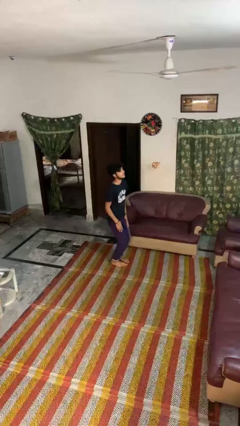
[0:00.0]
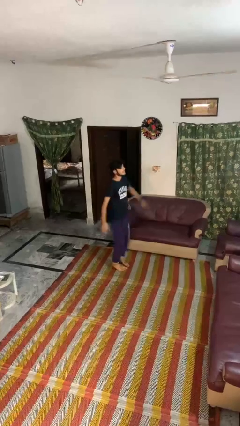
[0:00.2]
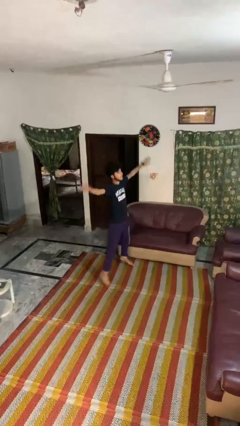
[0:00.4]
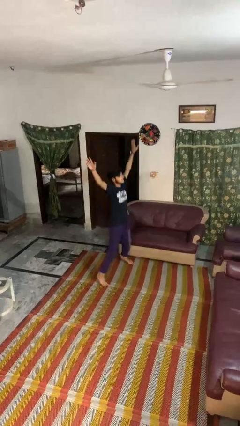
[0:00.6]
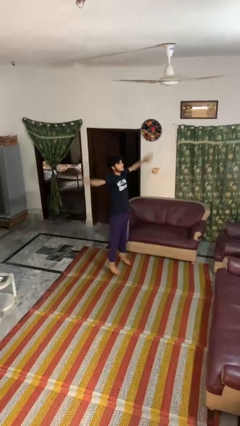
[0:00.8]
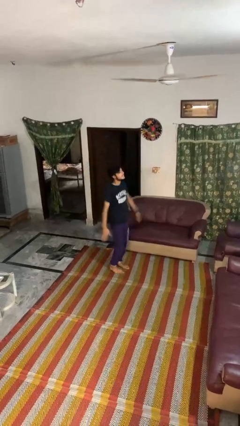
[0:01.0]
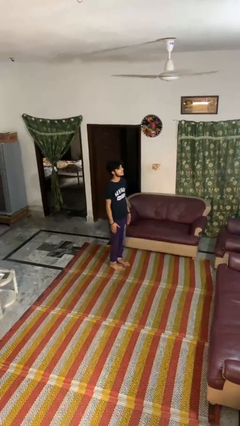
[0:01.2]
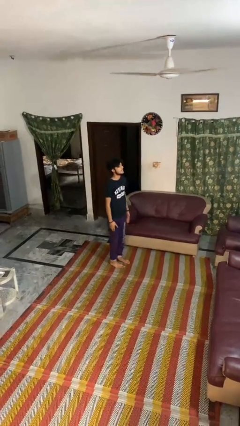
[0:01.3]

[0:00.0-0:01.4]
person exercises with jumping jacks

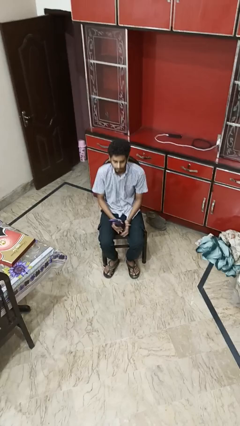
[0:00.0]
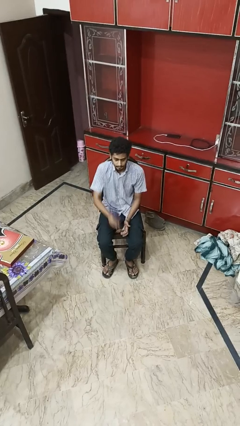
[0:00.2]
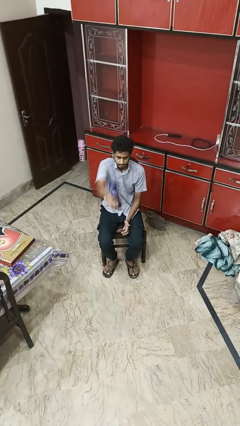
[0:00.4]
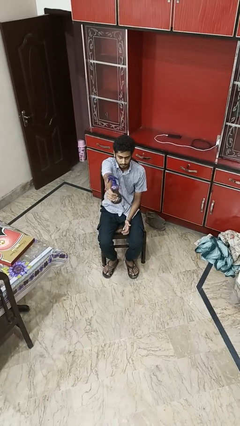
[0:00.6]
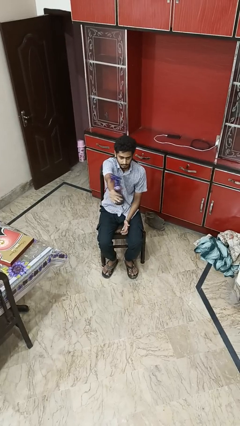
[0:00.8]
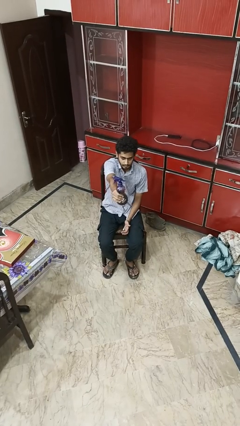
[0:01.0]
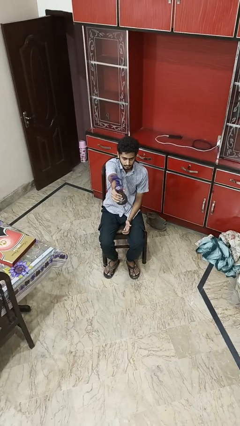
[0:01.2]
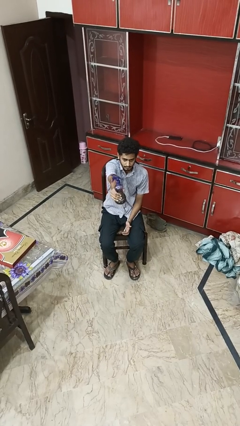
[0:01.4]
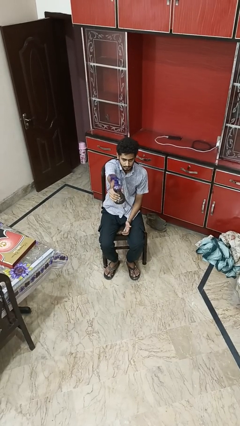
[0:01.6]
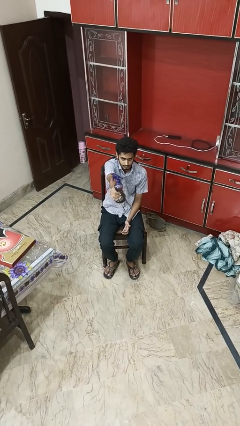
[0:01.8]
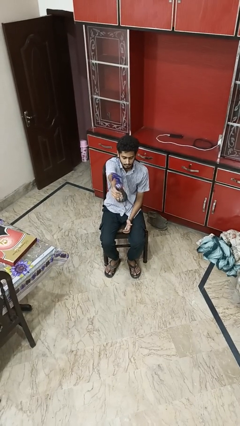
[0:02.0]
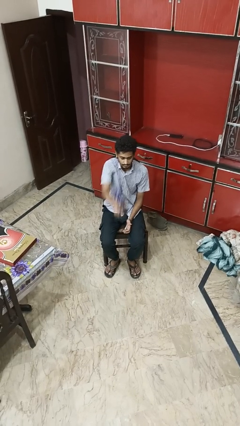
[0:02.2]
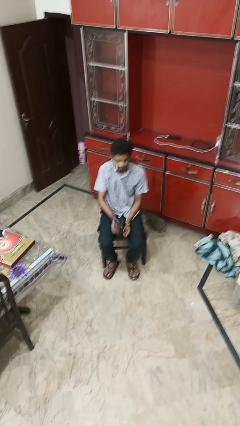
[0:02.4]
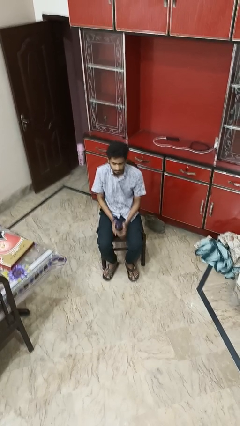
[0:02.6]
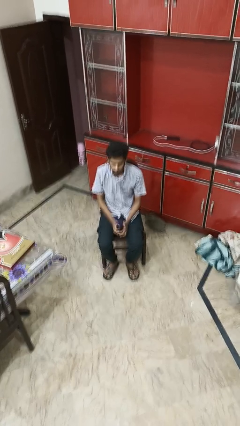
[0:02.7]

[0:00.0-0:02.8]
person squeezes object

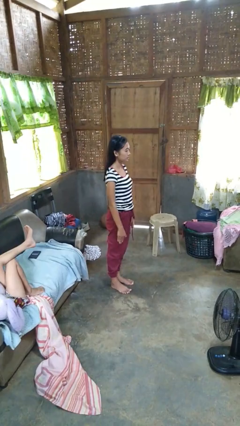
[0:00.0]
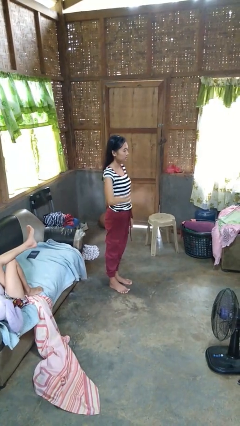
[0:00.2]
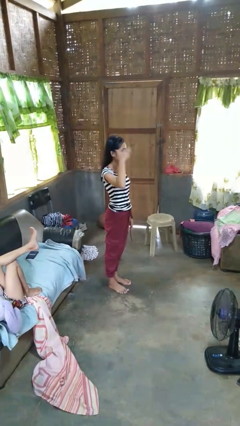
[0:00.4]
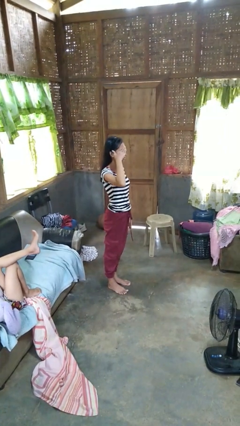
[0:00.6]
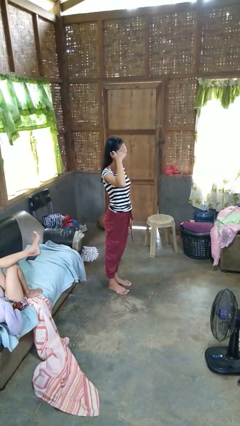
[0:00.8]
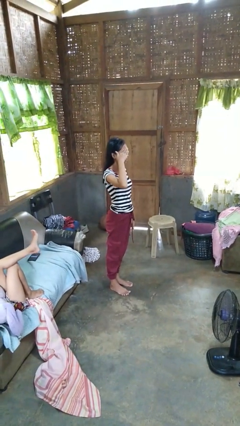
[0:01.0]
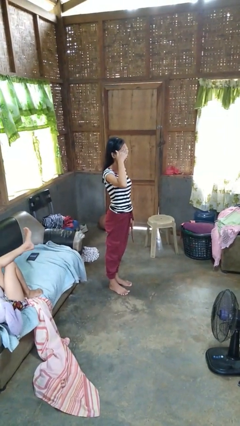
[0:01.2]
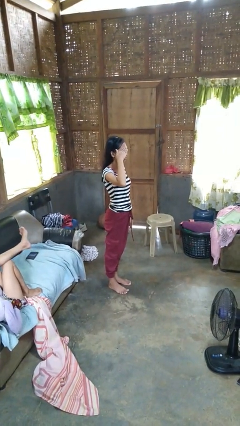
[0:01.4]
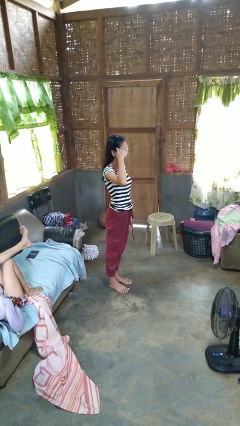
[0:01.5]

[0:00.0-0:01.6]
person salutes

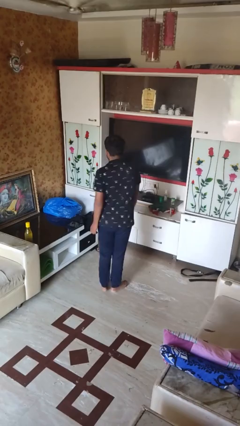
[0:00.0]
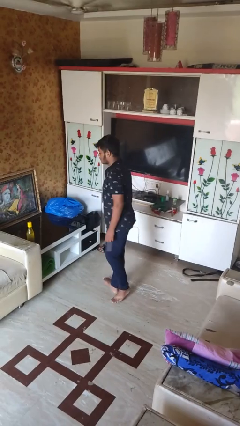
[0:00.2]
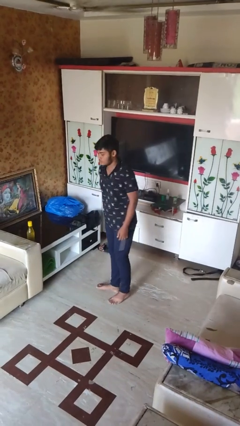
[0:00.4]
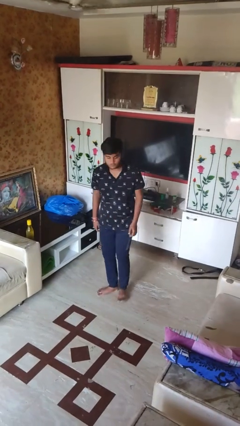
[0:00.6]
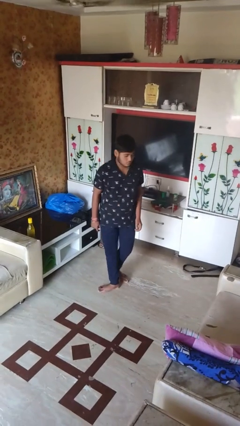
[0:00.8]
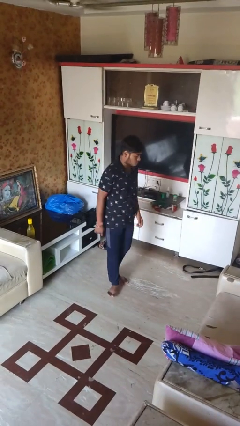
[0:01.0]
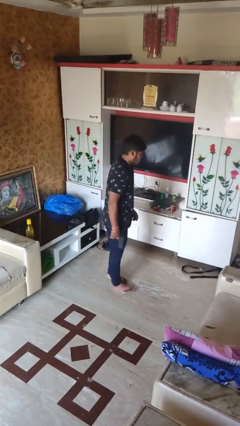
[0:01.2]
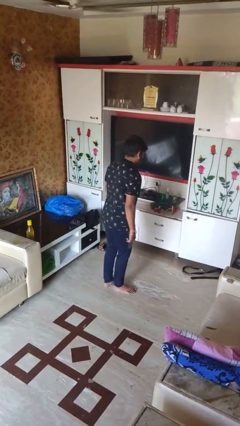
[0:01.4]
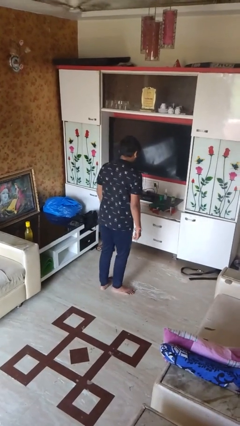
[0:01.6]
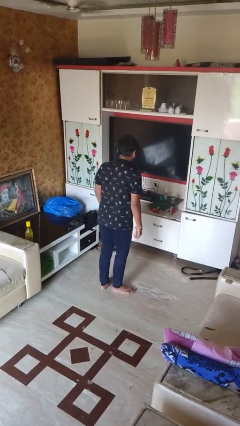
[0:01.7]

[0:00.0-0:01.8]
person twirls

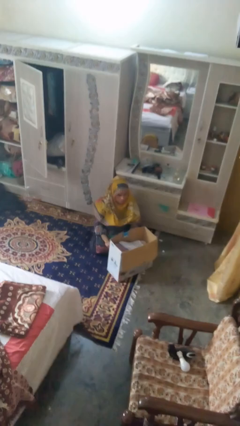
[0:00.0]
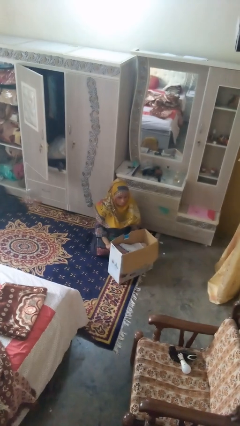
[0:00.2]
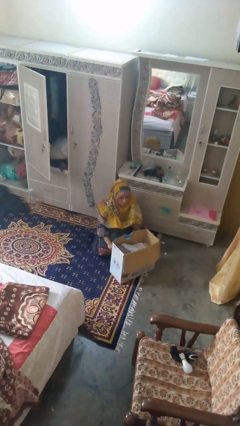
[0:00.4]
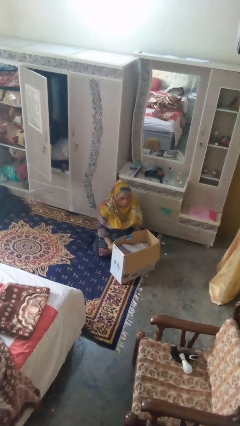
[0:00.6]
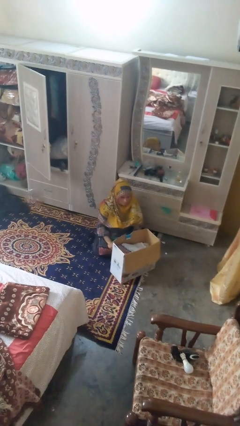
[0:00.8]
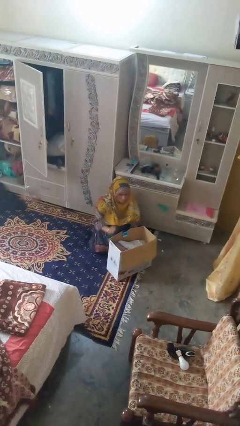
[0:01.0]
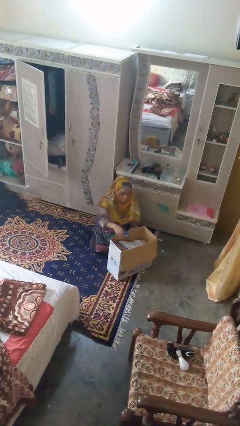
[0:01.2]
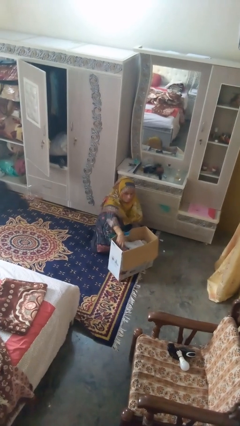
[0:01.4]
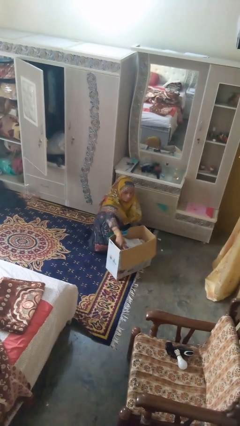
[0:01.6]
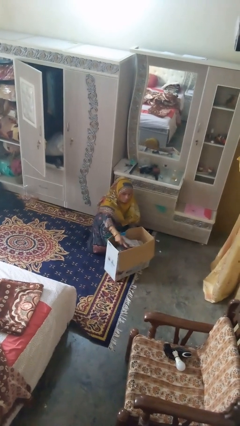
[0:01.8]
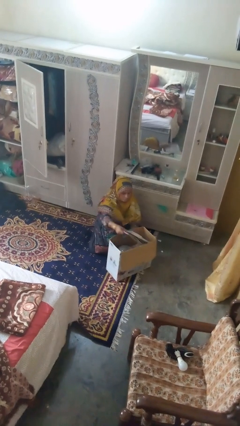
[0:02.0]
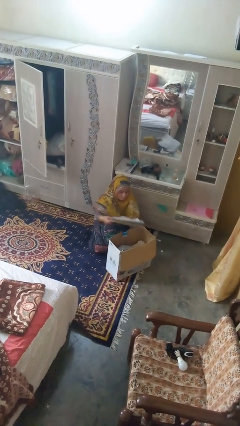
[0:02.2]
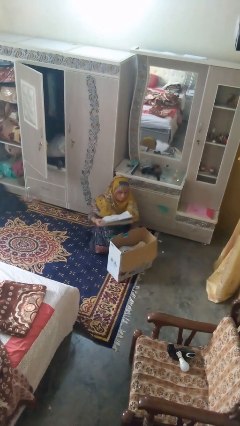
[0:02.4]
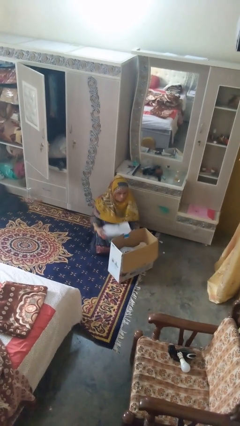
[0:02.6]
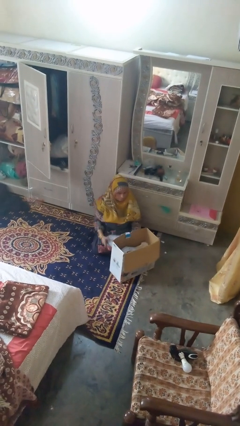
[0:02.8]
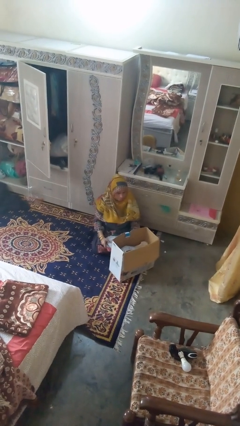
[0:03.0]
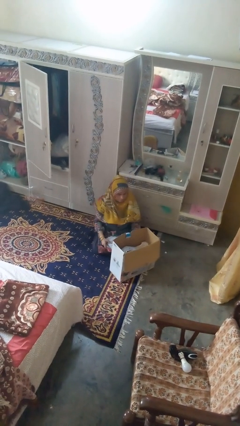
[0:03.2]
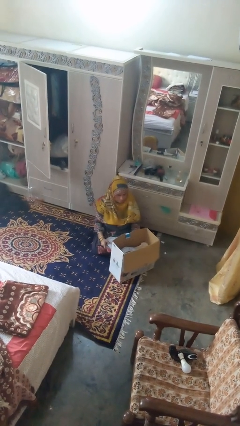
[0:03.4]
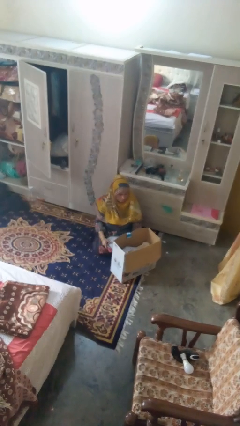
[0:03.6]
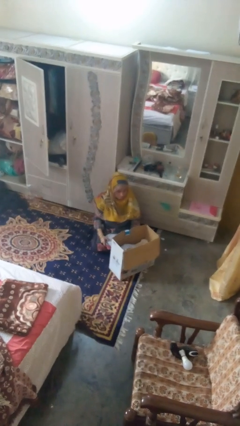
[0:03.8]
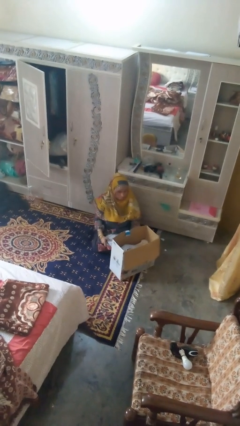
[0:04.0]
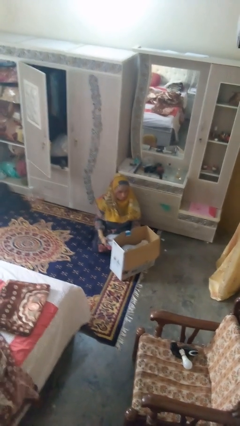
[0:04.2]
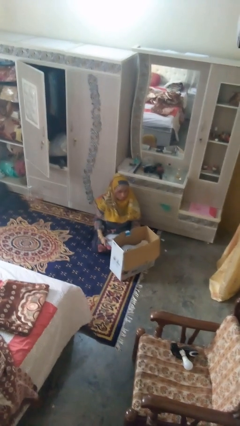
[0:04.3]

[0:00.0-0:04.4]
person takes object from box

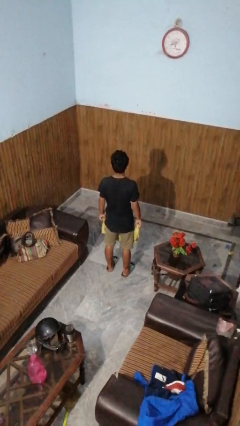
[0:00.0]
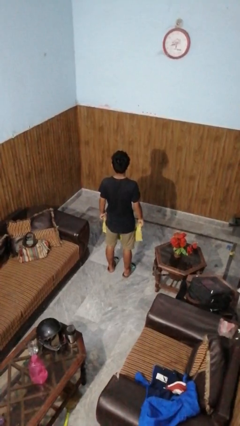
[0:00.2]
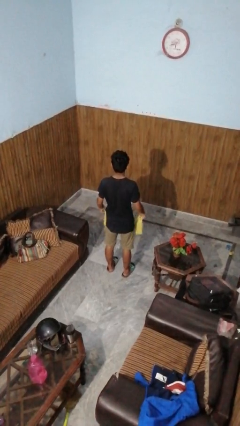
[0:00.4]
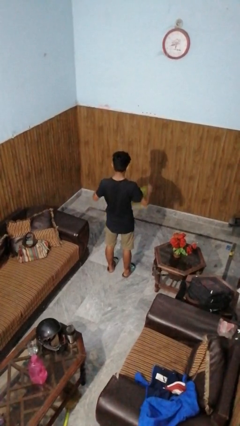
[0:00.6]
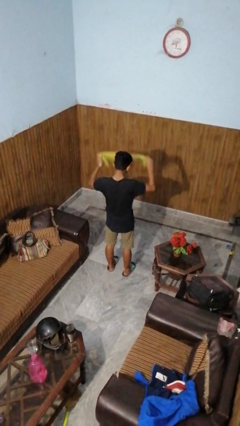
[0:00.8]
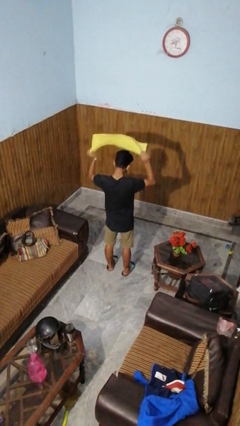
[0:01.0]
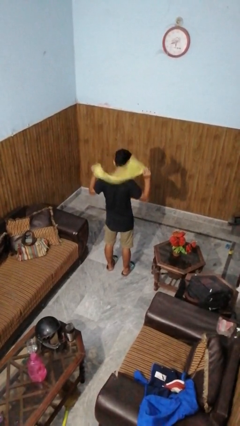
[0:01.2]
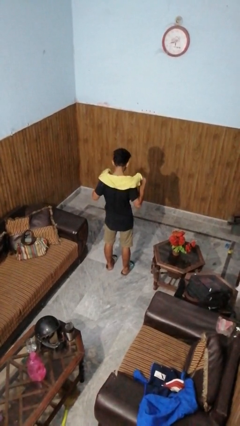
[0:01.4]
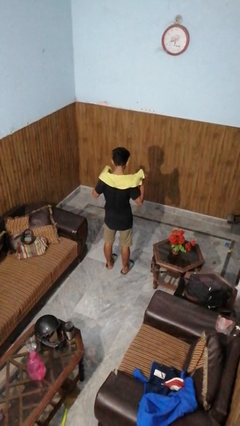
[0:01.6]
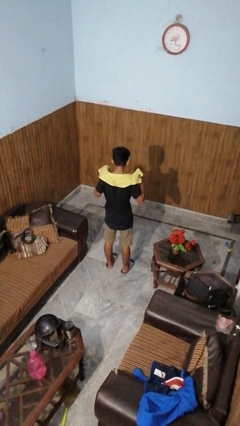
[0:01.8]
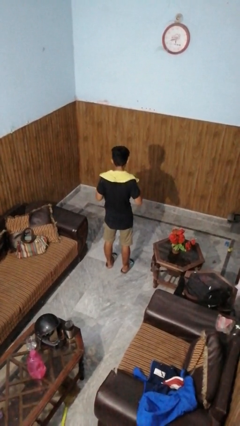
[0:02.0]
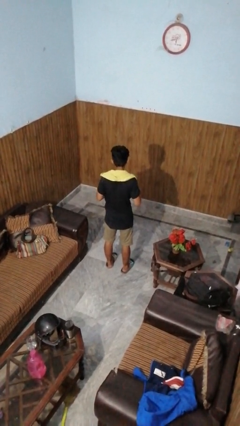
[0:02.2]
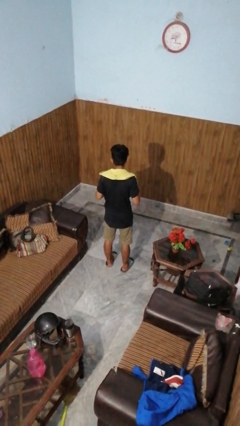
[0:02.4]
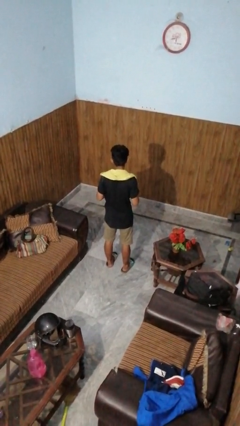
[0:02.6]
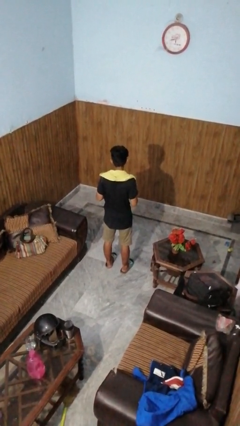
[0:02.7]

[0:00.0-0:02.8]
person puts on scarf

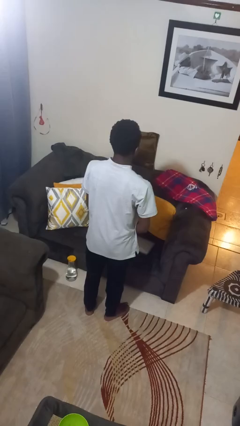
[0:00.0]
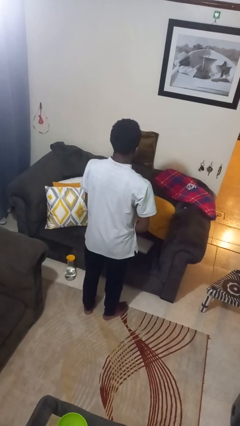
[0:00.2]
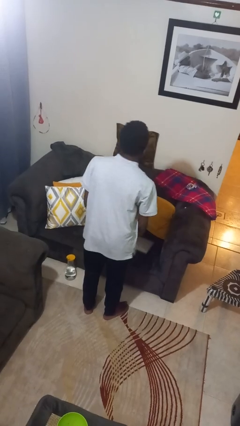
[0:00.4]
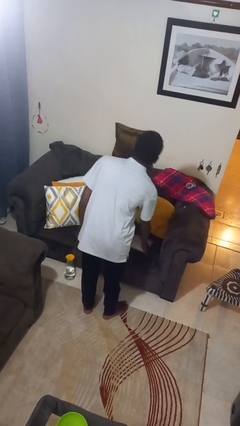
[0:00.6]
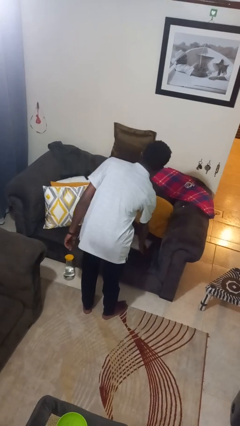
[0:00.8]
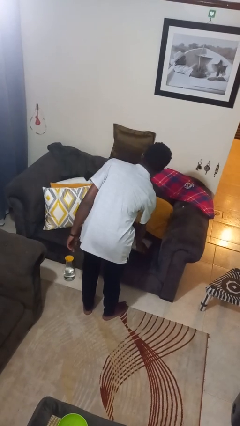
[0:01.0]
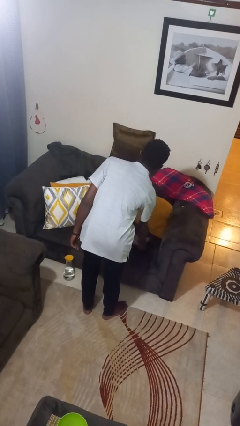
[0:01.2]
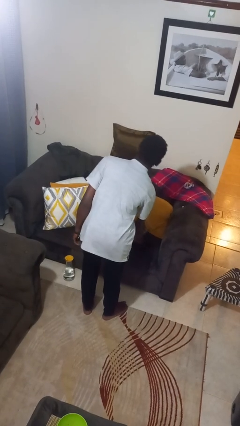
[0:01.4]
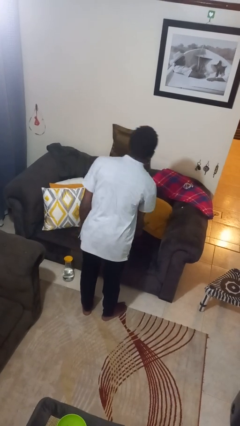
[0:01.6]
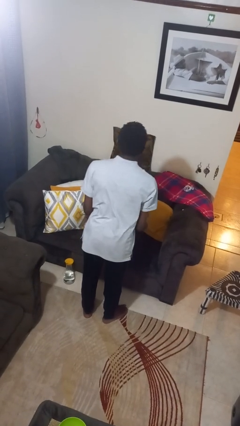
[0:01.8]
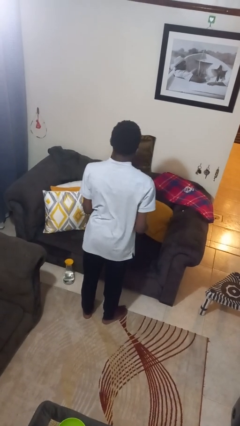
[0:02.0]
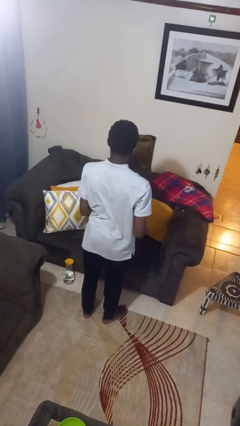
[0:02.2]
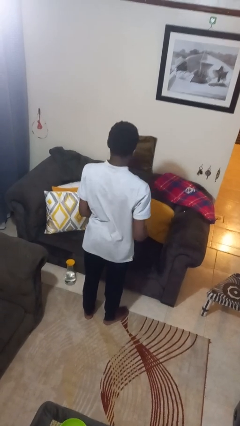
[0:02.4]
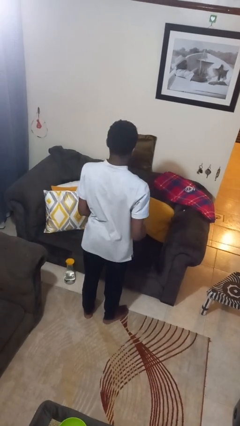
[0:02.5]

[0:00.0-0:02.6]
person picks up object from couch
